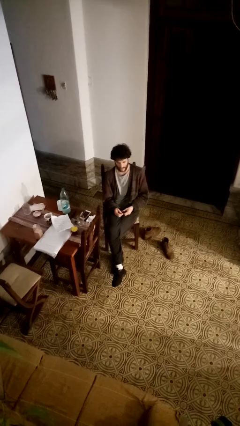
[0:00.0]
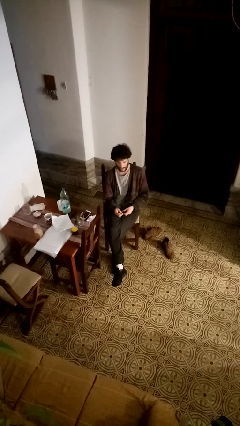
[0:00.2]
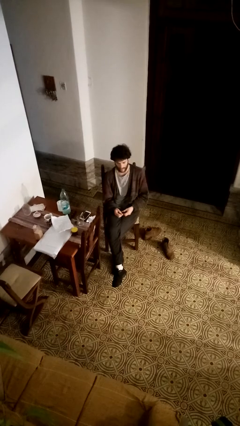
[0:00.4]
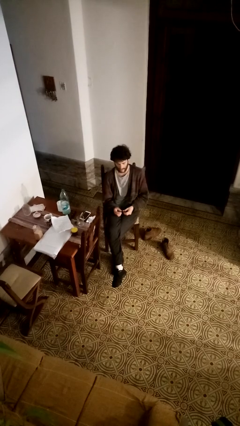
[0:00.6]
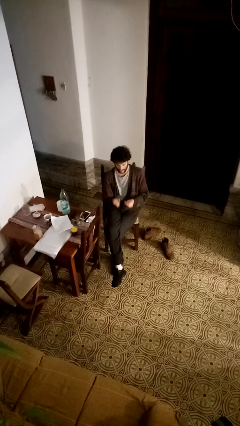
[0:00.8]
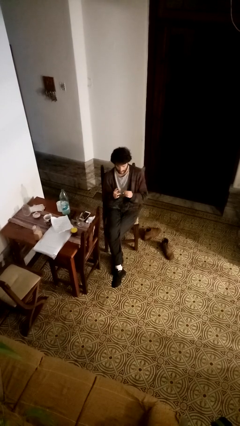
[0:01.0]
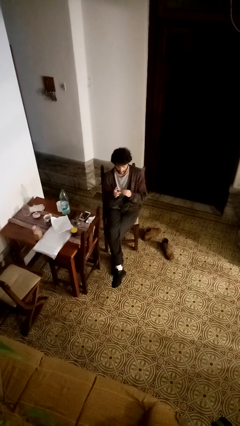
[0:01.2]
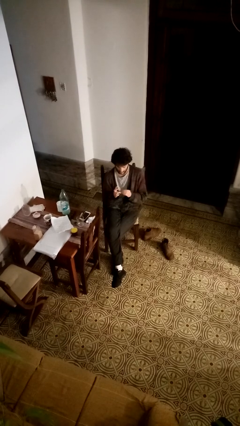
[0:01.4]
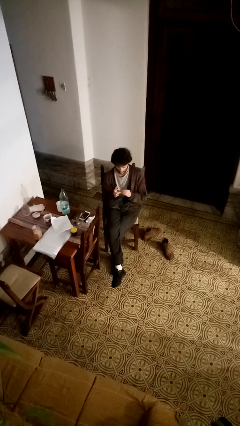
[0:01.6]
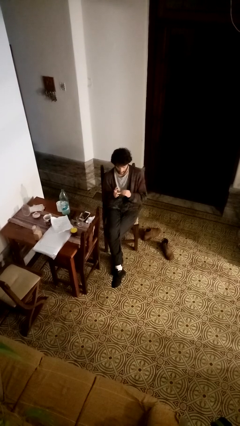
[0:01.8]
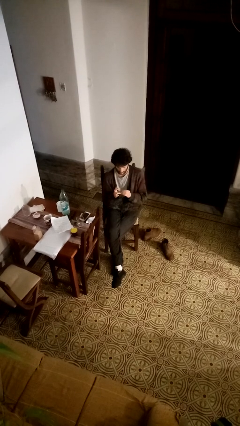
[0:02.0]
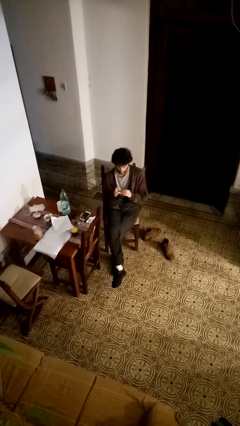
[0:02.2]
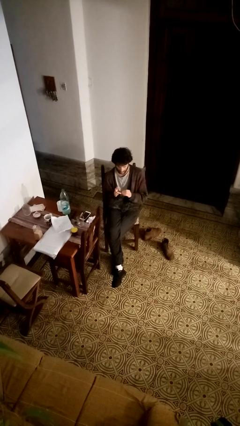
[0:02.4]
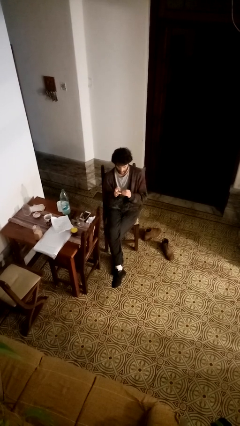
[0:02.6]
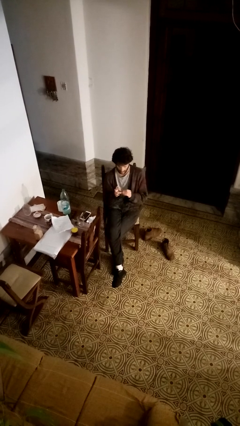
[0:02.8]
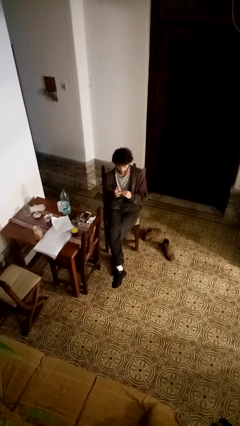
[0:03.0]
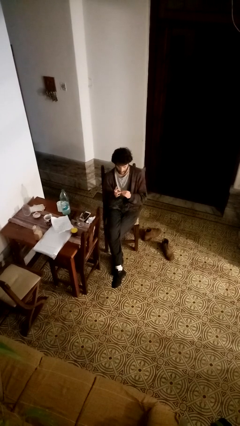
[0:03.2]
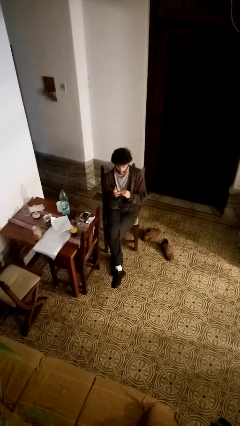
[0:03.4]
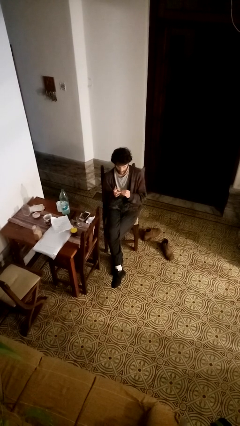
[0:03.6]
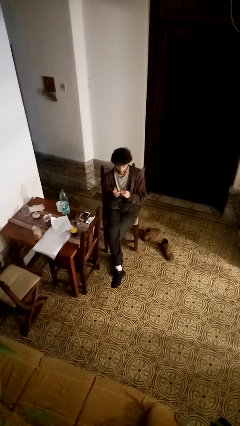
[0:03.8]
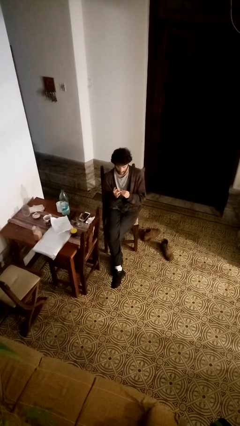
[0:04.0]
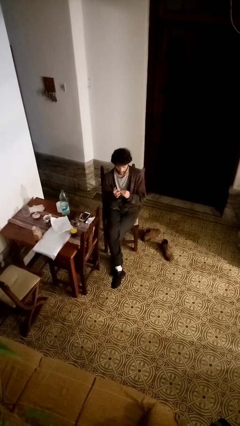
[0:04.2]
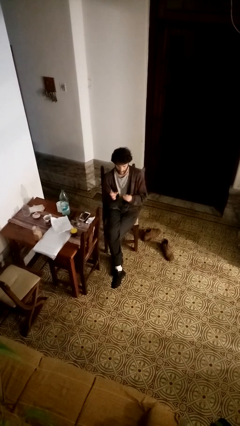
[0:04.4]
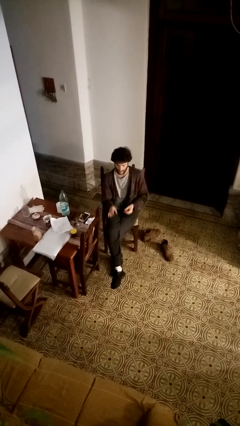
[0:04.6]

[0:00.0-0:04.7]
person clips fingernails

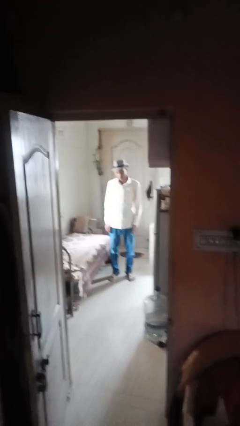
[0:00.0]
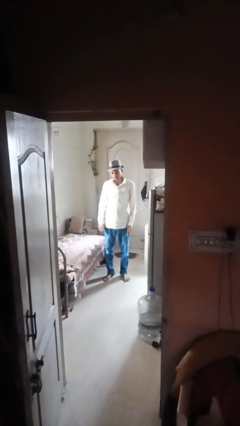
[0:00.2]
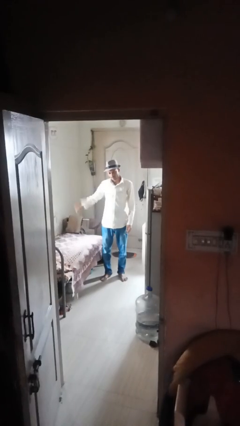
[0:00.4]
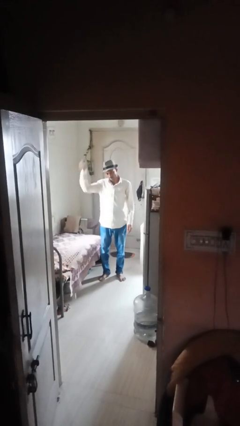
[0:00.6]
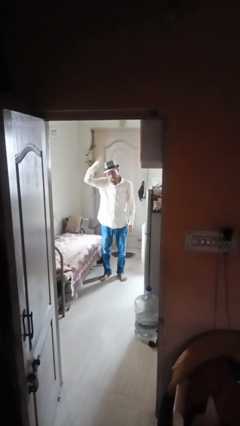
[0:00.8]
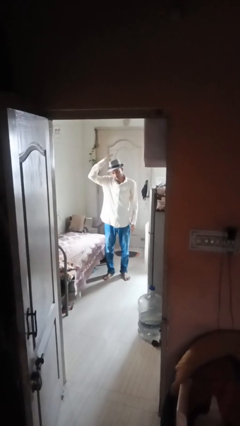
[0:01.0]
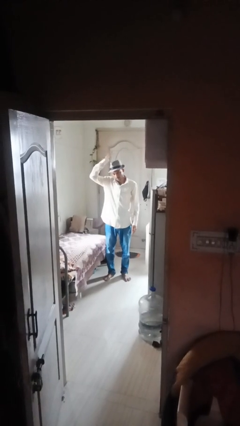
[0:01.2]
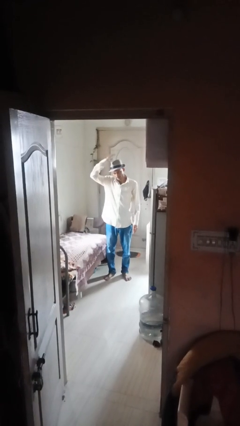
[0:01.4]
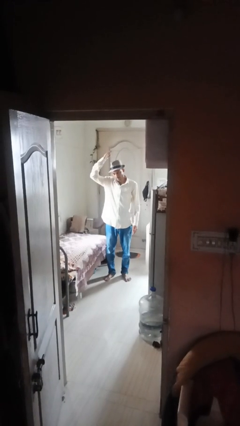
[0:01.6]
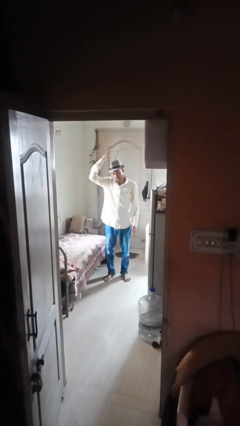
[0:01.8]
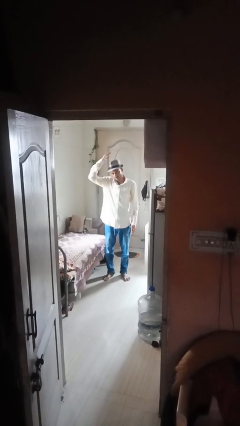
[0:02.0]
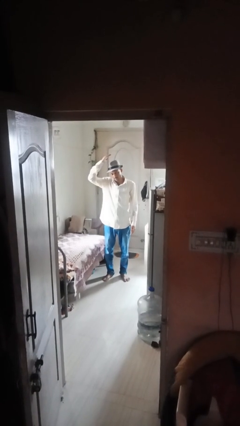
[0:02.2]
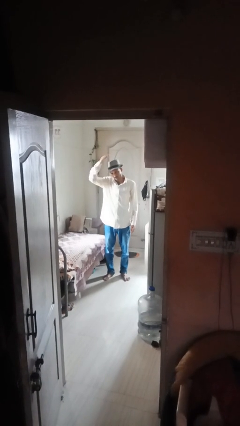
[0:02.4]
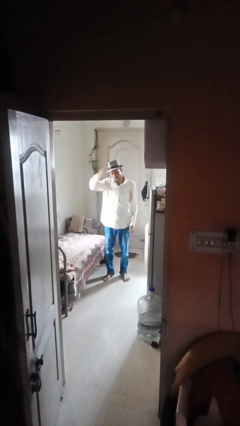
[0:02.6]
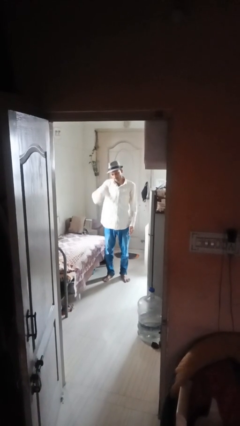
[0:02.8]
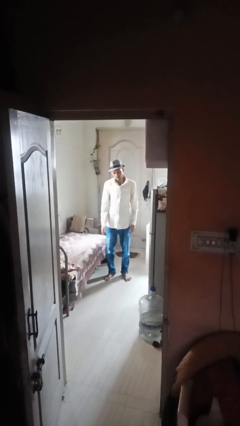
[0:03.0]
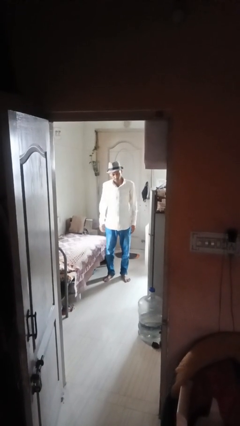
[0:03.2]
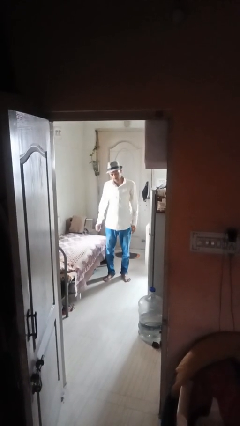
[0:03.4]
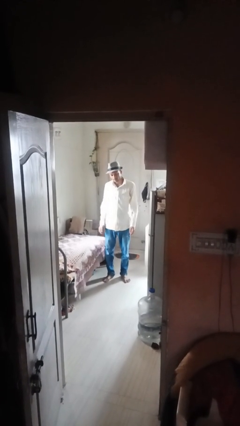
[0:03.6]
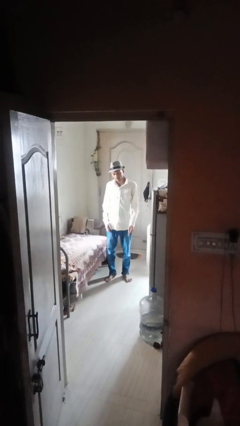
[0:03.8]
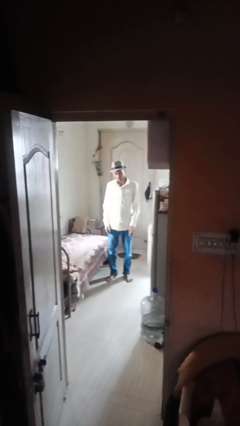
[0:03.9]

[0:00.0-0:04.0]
person pats head

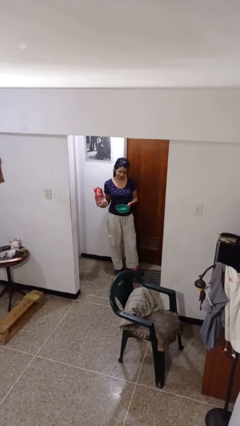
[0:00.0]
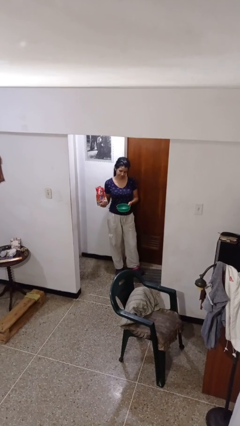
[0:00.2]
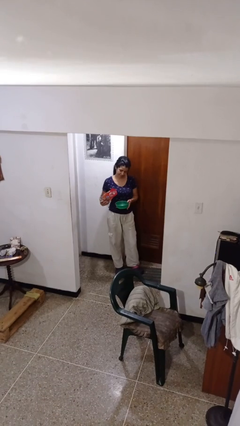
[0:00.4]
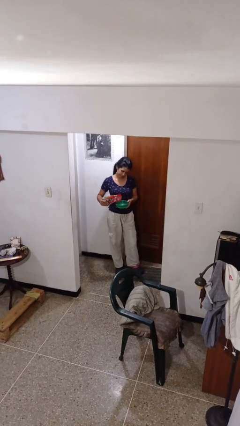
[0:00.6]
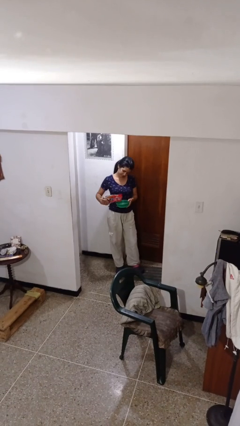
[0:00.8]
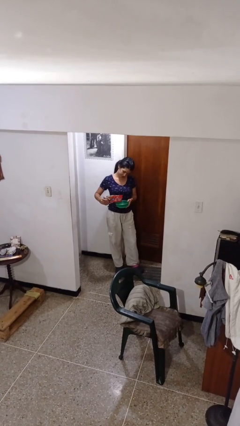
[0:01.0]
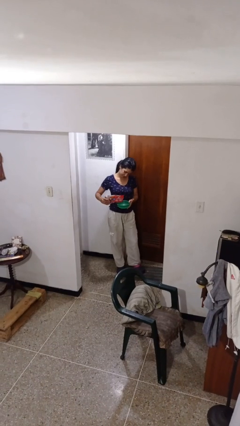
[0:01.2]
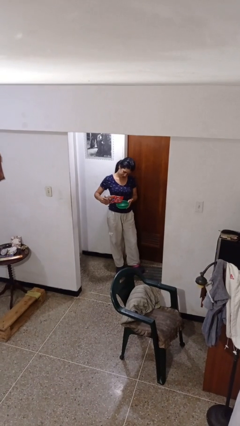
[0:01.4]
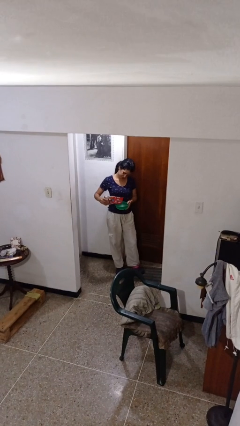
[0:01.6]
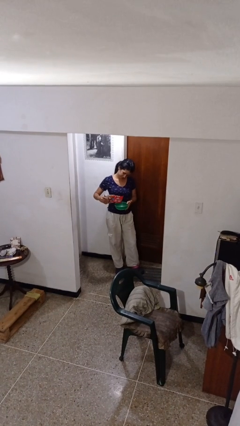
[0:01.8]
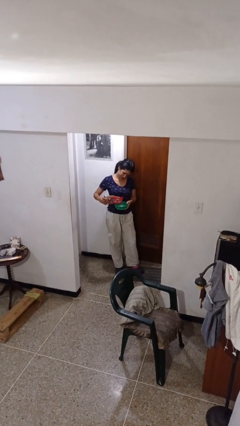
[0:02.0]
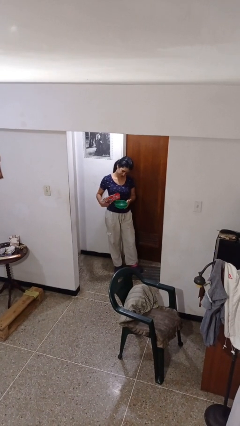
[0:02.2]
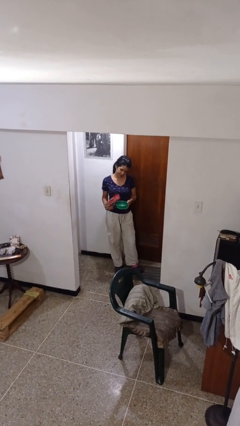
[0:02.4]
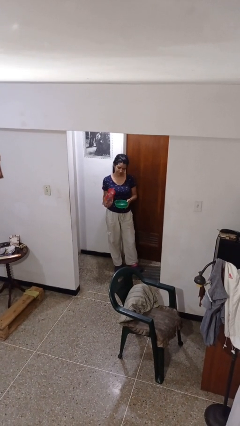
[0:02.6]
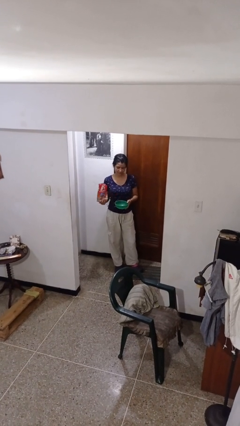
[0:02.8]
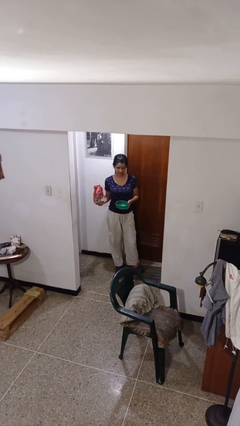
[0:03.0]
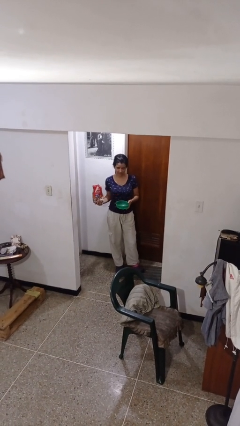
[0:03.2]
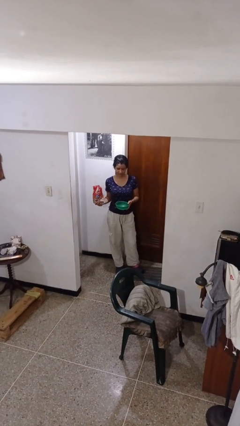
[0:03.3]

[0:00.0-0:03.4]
person pours into bowl

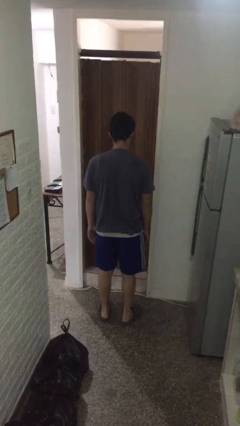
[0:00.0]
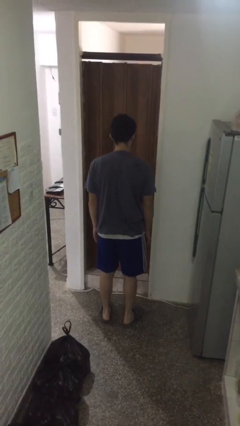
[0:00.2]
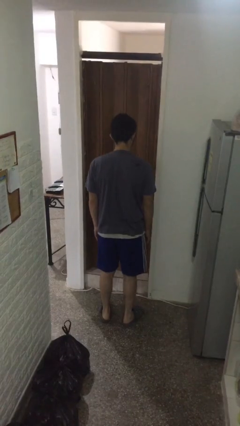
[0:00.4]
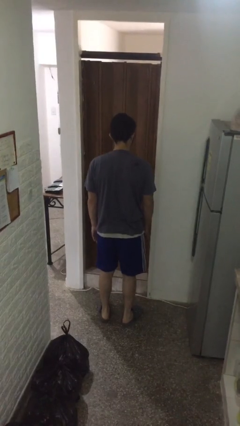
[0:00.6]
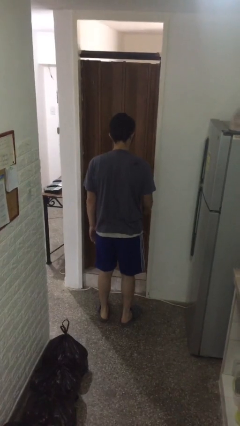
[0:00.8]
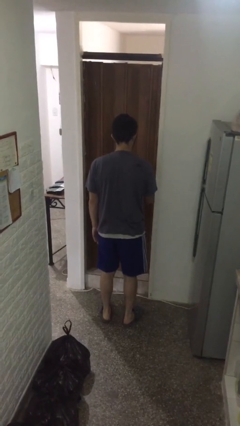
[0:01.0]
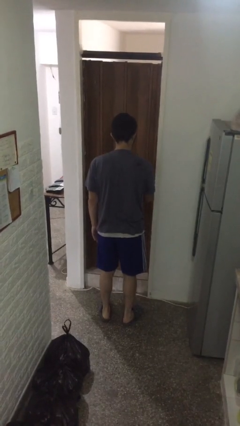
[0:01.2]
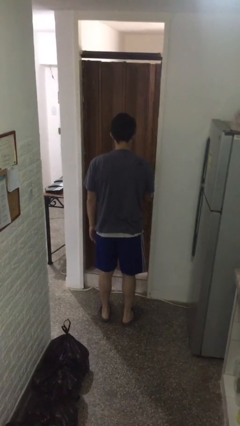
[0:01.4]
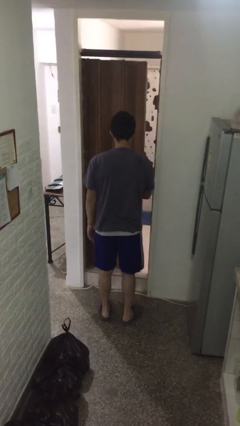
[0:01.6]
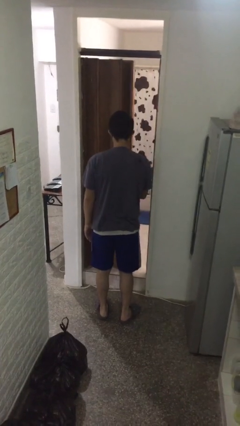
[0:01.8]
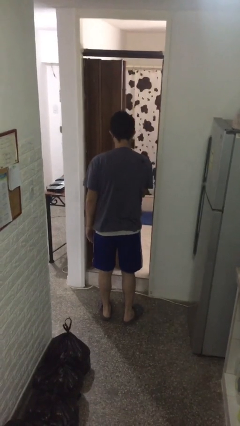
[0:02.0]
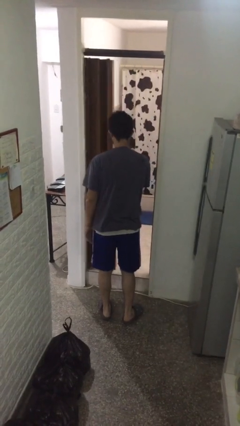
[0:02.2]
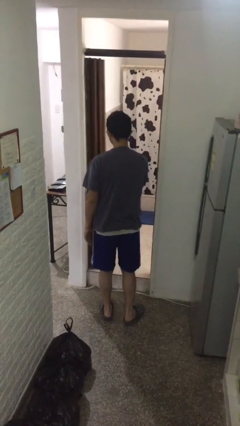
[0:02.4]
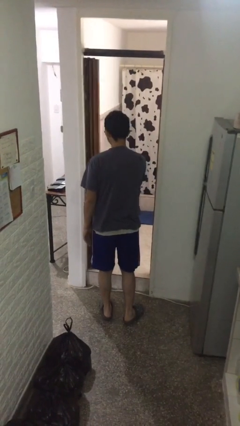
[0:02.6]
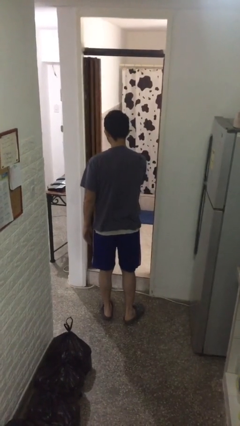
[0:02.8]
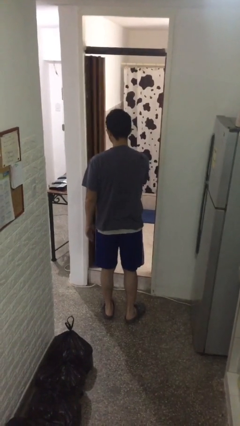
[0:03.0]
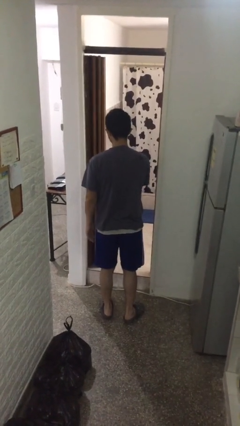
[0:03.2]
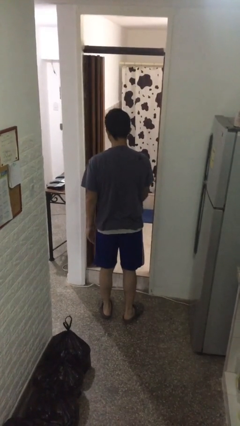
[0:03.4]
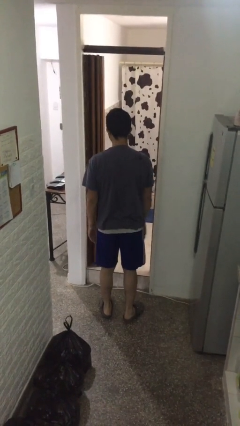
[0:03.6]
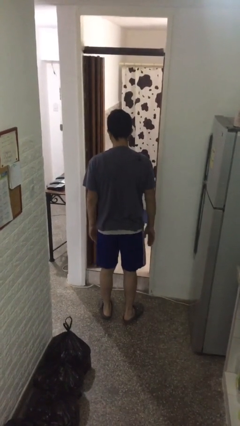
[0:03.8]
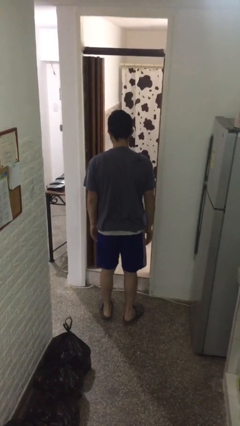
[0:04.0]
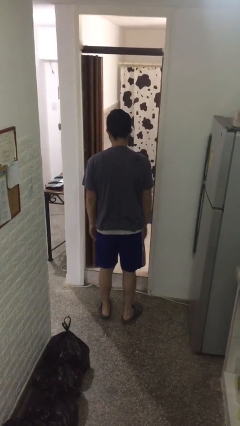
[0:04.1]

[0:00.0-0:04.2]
person opens sliding door

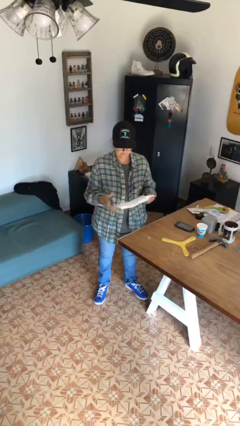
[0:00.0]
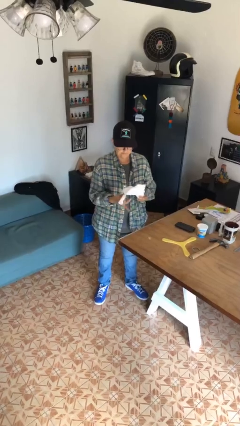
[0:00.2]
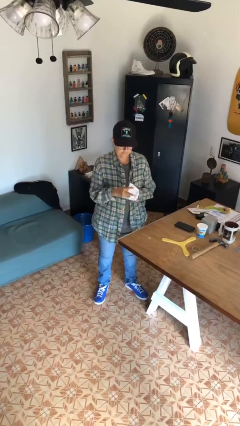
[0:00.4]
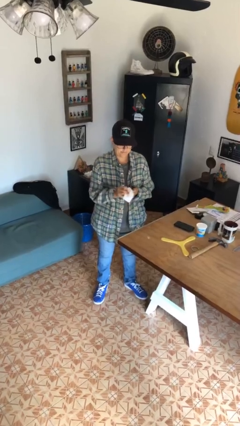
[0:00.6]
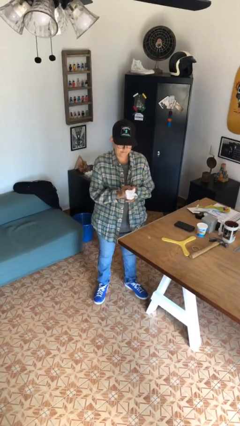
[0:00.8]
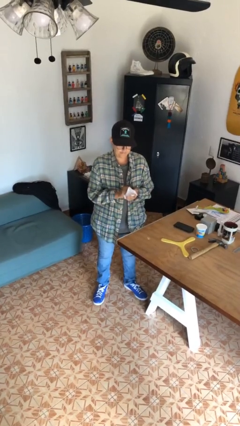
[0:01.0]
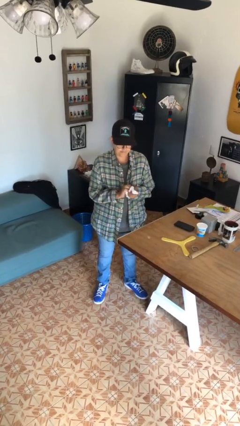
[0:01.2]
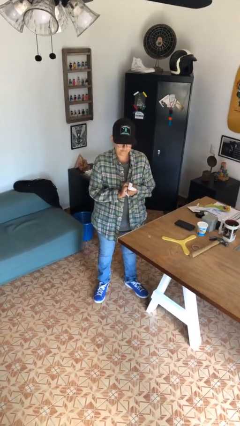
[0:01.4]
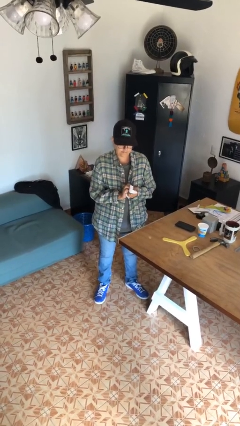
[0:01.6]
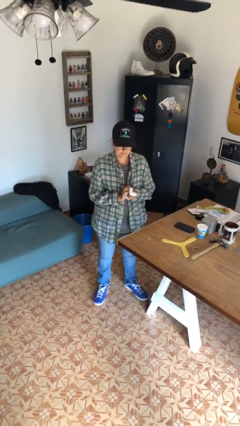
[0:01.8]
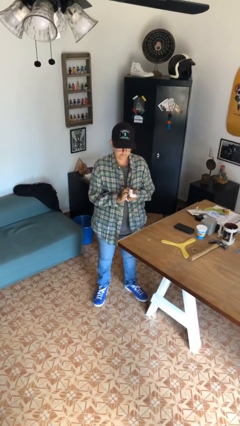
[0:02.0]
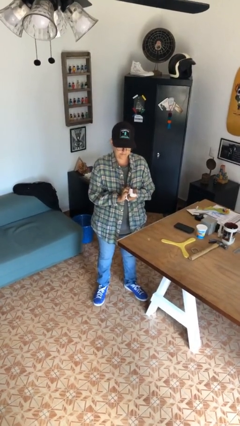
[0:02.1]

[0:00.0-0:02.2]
person crumples paper
